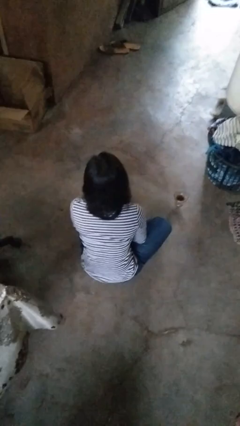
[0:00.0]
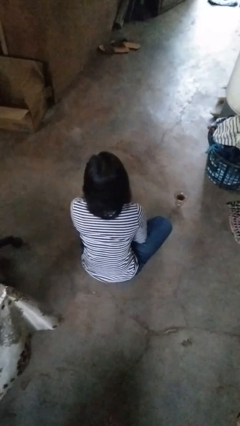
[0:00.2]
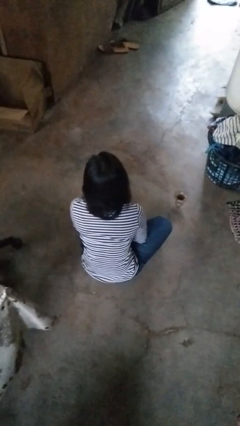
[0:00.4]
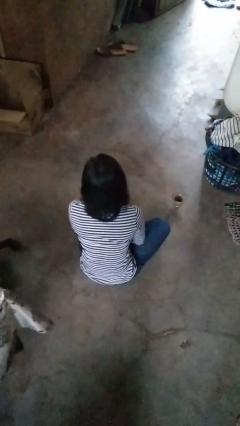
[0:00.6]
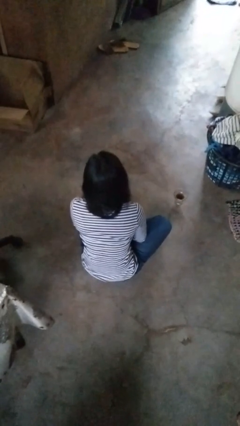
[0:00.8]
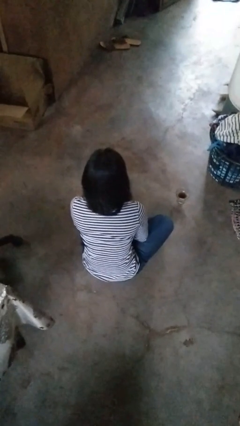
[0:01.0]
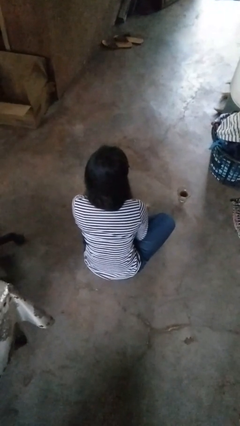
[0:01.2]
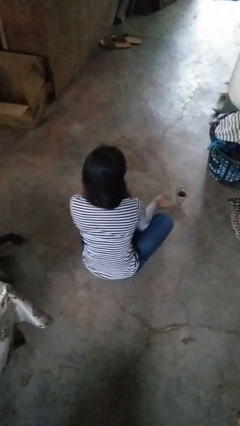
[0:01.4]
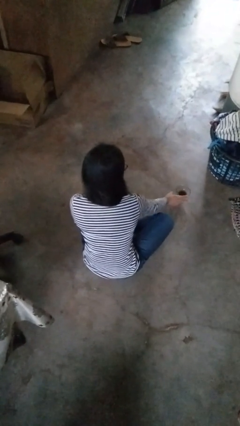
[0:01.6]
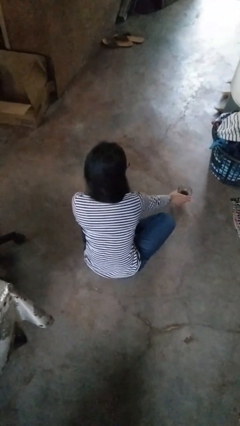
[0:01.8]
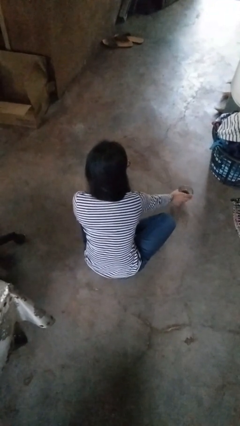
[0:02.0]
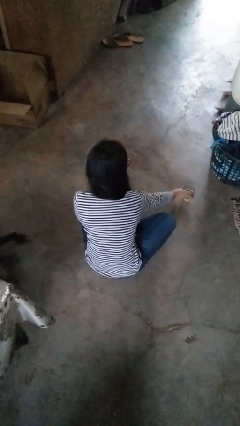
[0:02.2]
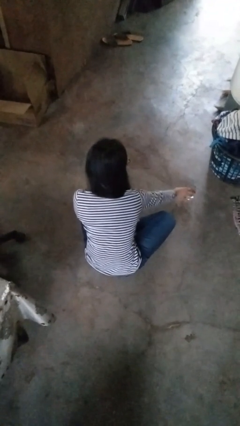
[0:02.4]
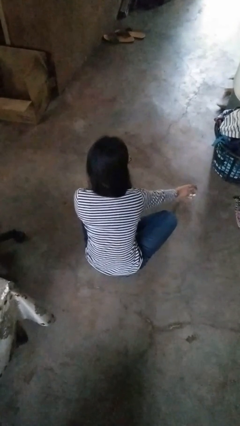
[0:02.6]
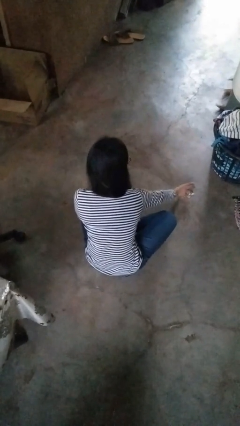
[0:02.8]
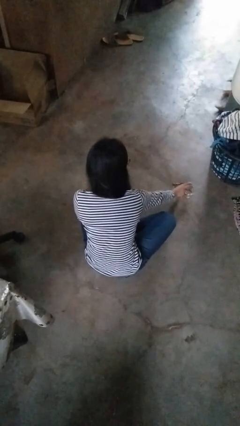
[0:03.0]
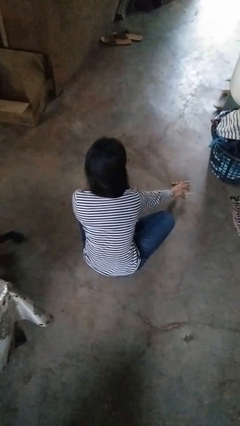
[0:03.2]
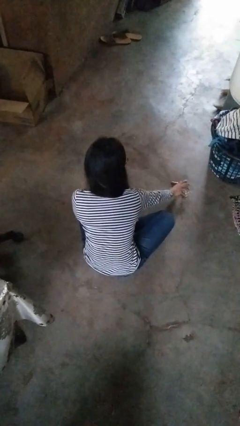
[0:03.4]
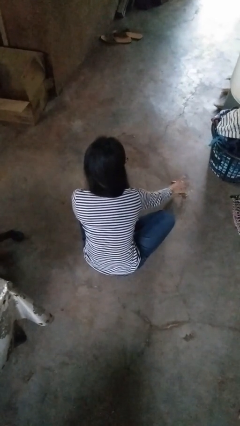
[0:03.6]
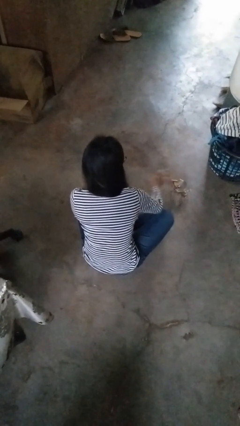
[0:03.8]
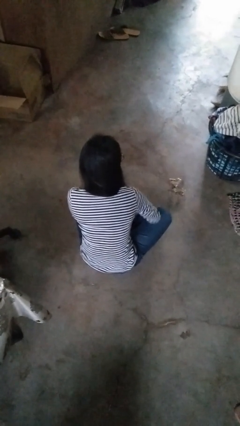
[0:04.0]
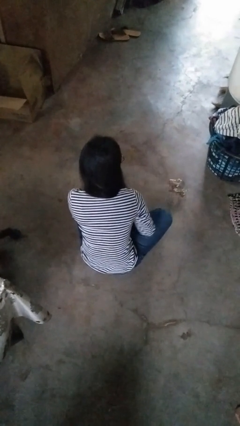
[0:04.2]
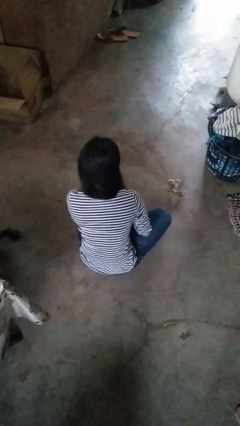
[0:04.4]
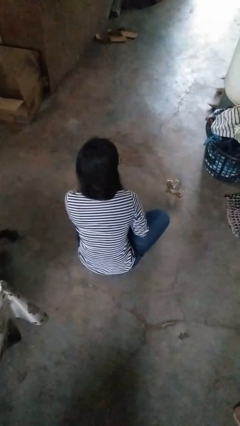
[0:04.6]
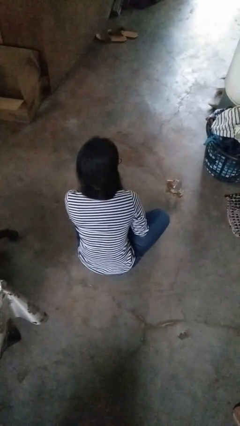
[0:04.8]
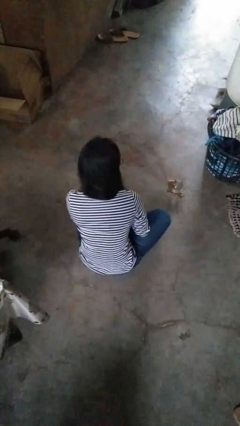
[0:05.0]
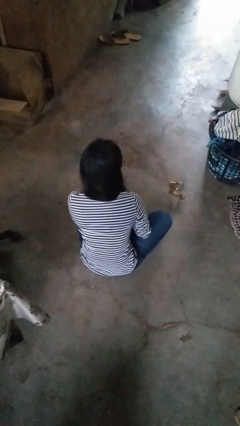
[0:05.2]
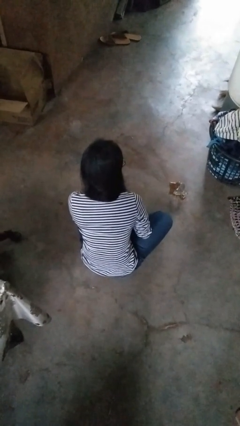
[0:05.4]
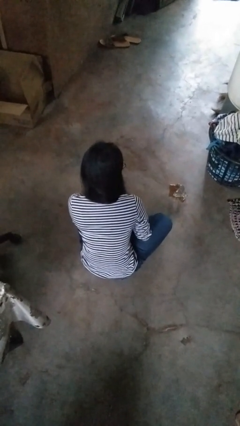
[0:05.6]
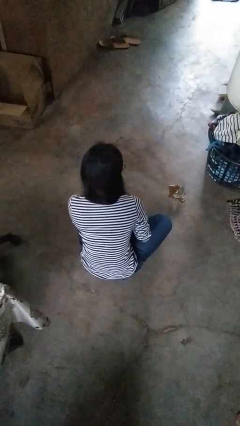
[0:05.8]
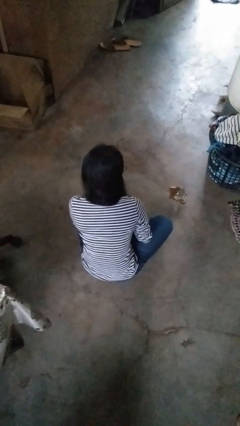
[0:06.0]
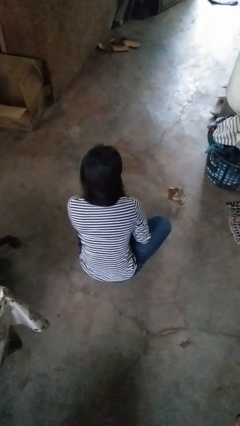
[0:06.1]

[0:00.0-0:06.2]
person spills on floor

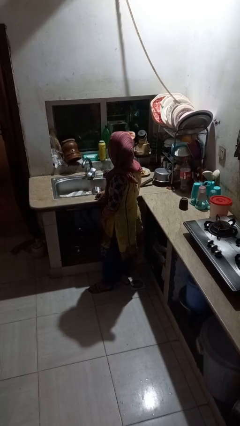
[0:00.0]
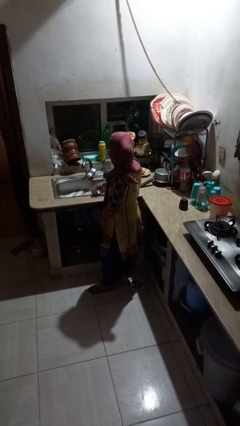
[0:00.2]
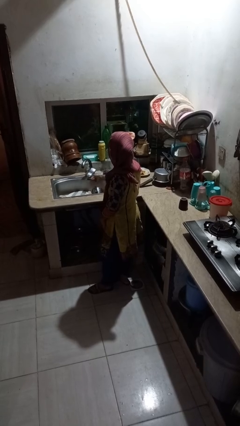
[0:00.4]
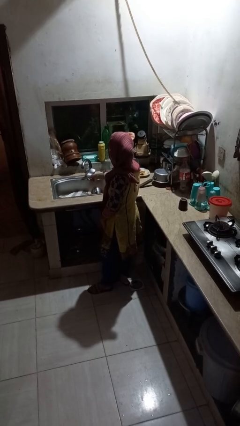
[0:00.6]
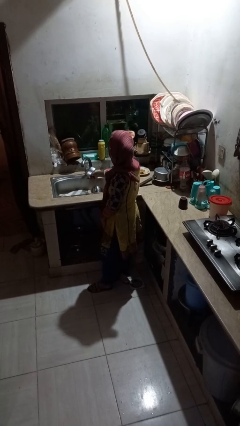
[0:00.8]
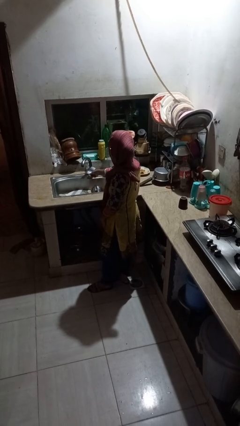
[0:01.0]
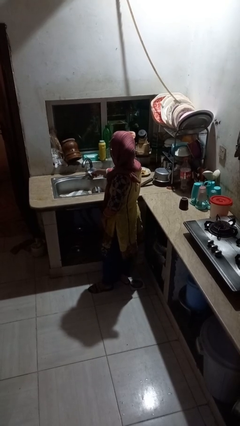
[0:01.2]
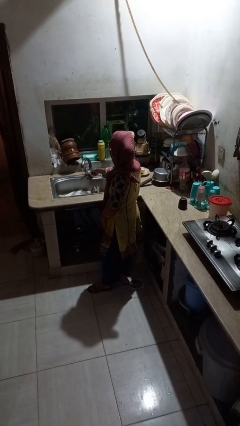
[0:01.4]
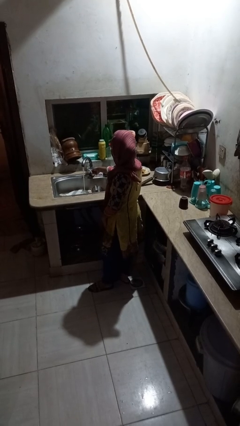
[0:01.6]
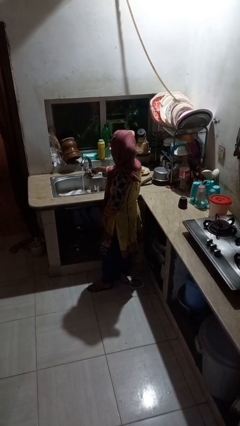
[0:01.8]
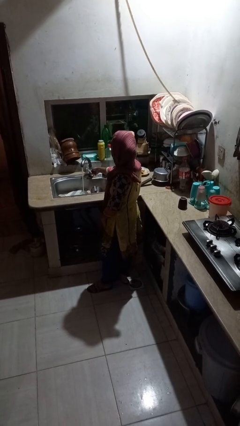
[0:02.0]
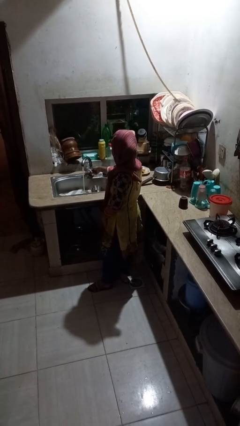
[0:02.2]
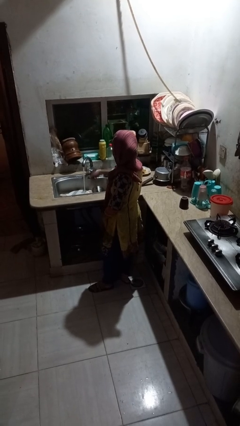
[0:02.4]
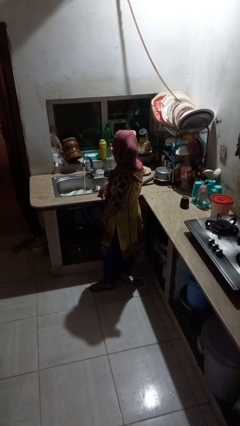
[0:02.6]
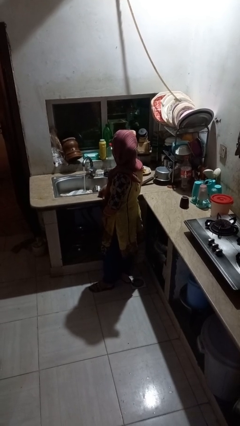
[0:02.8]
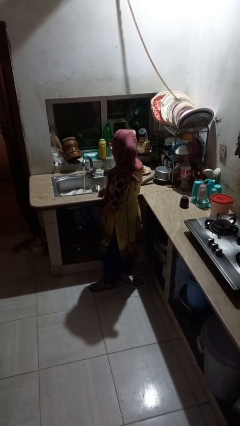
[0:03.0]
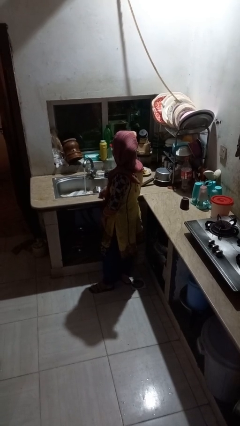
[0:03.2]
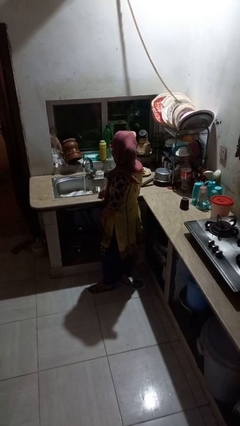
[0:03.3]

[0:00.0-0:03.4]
person turns on faucet

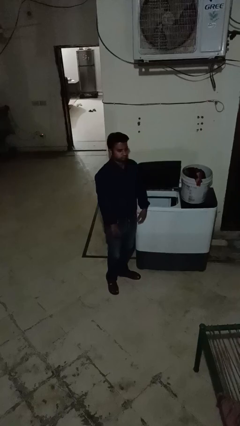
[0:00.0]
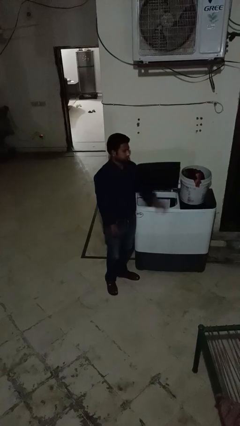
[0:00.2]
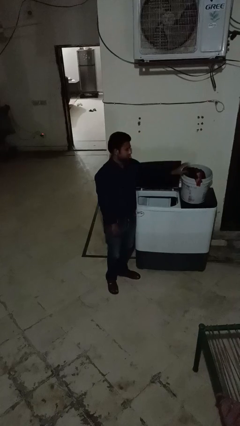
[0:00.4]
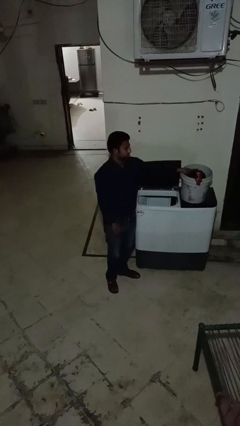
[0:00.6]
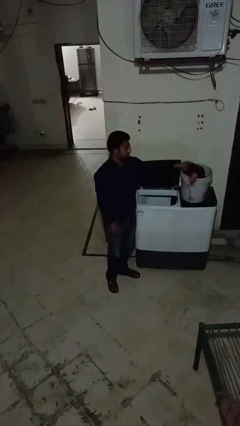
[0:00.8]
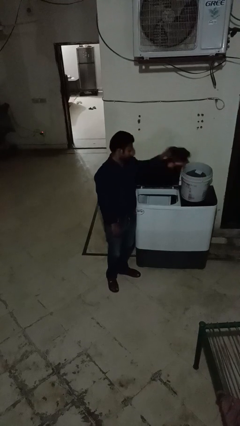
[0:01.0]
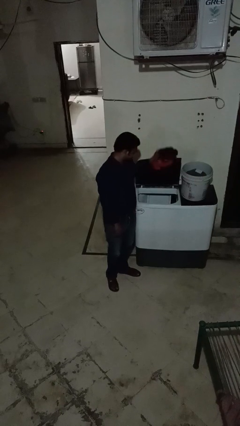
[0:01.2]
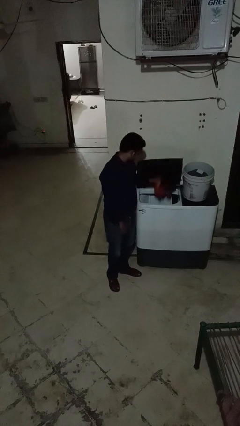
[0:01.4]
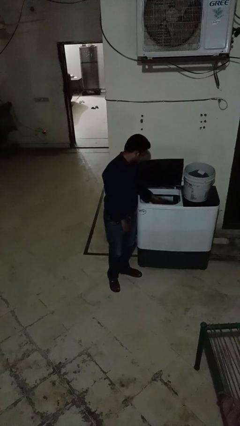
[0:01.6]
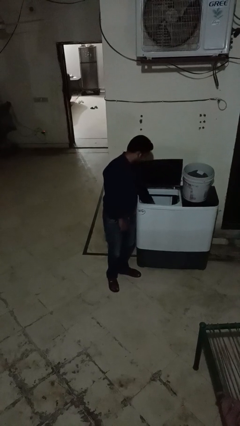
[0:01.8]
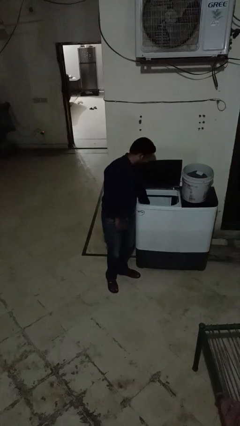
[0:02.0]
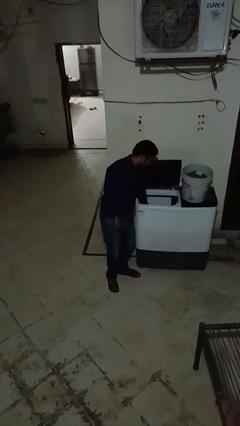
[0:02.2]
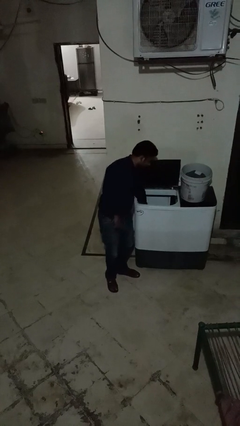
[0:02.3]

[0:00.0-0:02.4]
person loads clotheswasher

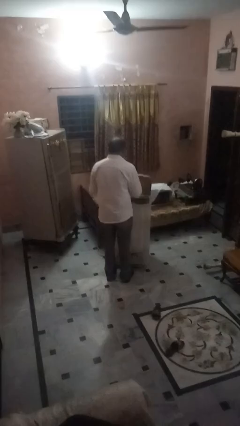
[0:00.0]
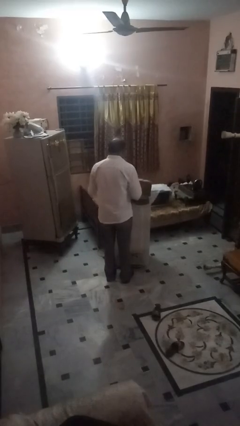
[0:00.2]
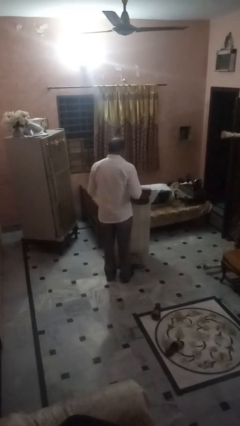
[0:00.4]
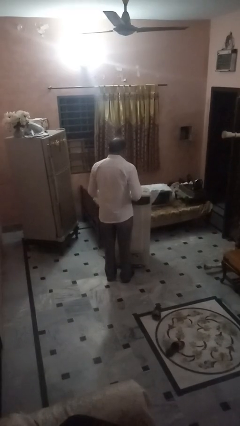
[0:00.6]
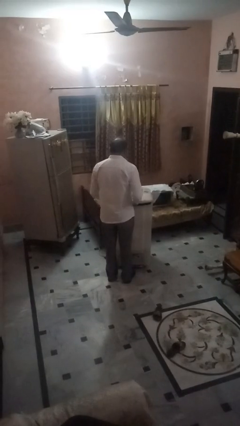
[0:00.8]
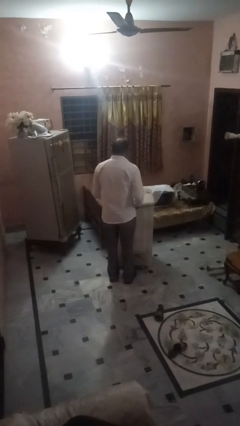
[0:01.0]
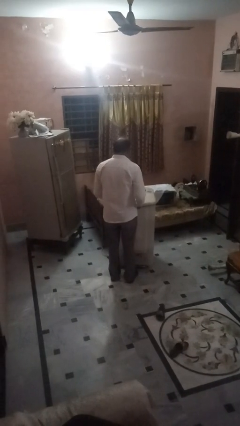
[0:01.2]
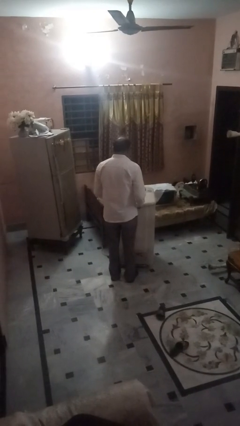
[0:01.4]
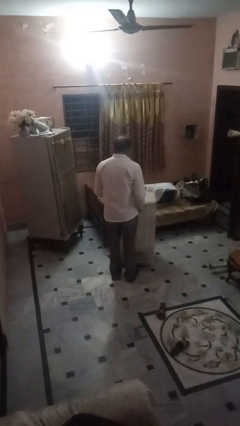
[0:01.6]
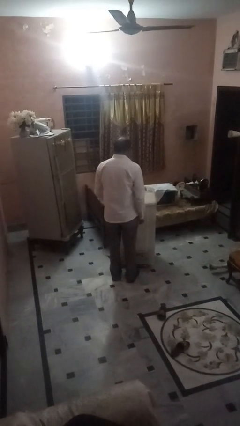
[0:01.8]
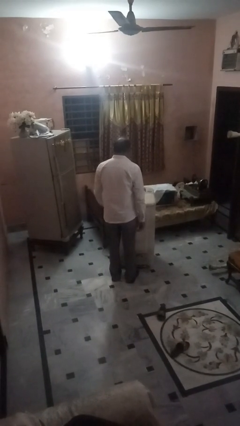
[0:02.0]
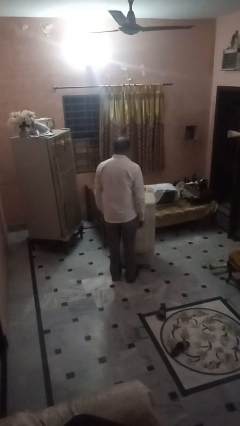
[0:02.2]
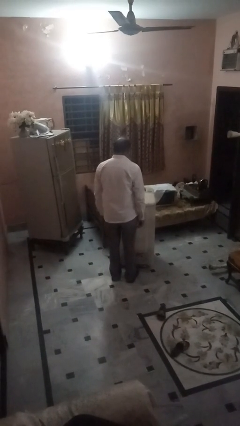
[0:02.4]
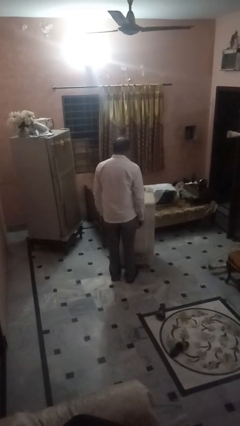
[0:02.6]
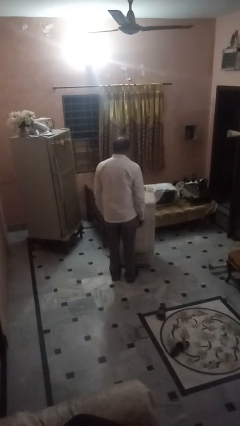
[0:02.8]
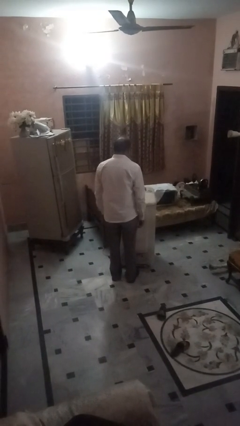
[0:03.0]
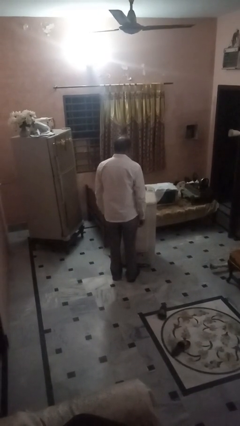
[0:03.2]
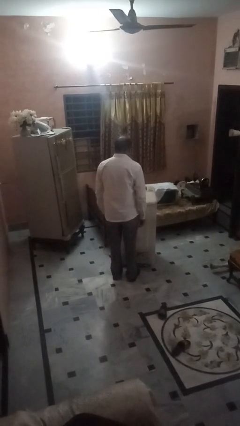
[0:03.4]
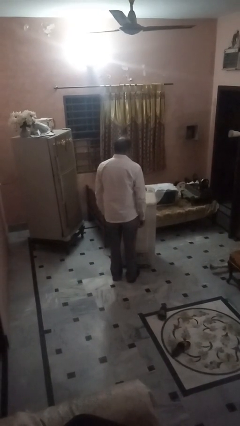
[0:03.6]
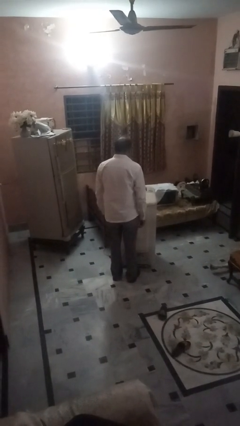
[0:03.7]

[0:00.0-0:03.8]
person closes clothes washer

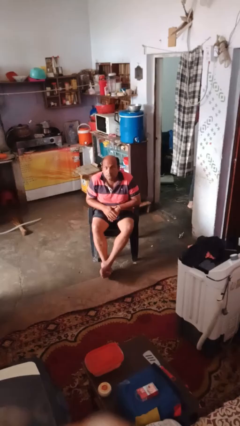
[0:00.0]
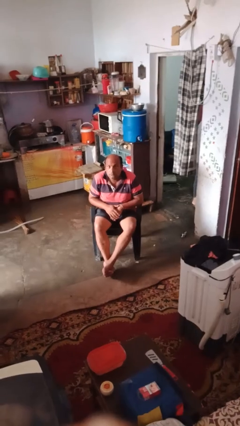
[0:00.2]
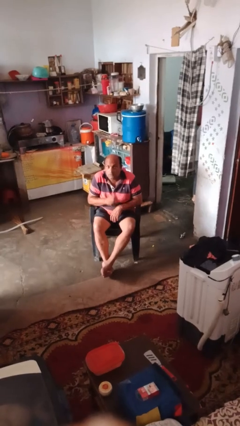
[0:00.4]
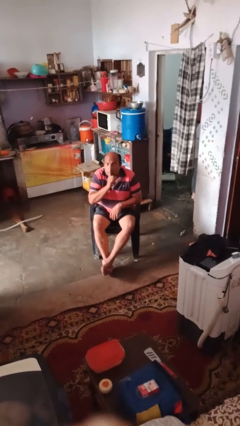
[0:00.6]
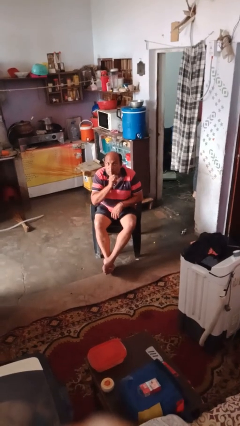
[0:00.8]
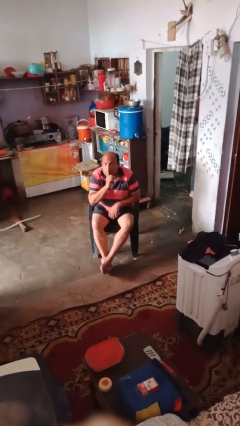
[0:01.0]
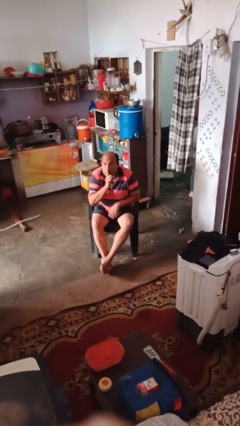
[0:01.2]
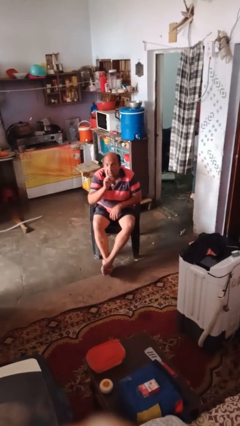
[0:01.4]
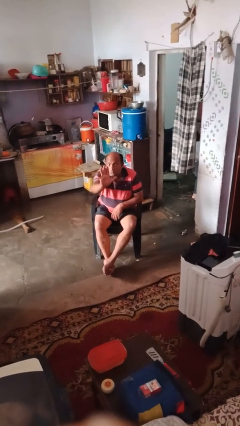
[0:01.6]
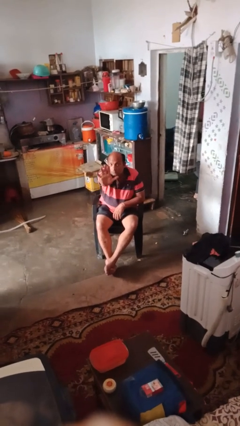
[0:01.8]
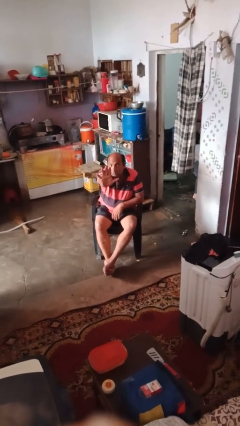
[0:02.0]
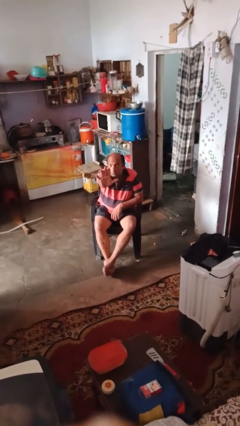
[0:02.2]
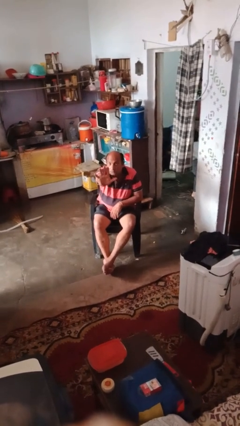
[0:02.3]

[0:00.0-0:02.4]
person gestures be quiet
